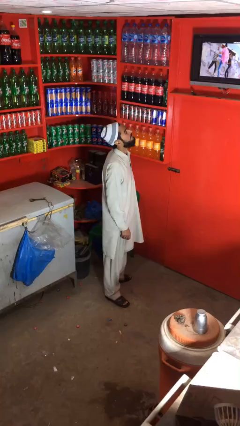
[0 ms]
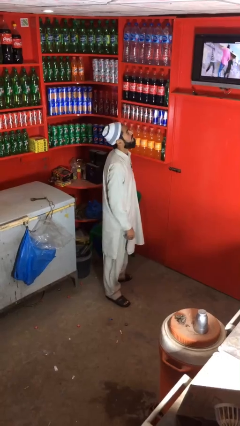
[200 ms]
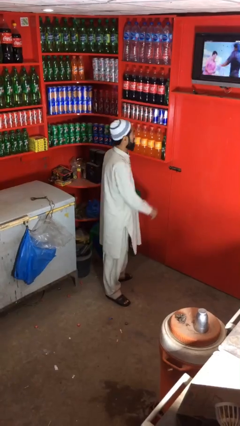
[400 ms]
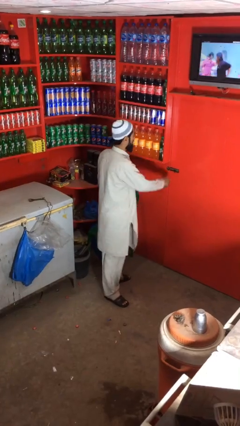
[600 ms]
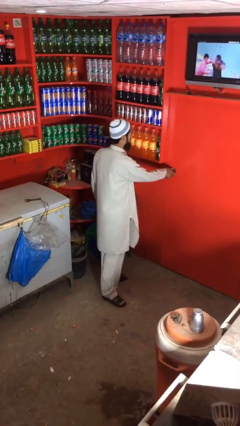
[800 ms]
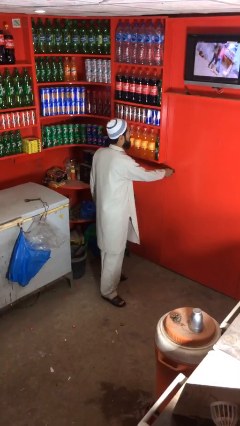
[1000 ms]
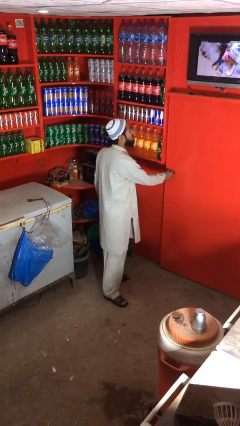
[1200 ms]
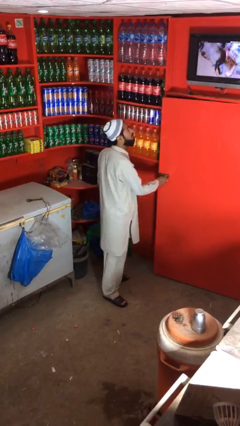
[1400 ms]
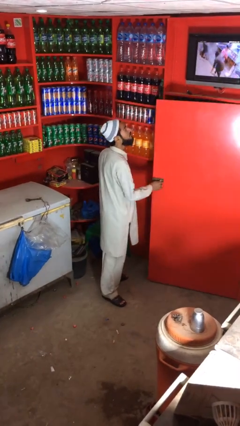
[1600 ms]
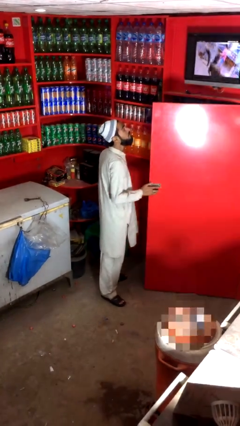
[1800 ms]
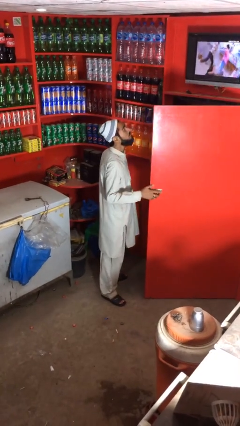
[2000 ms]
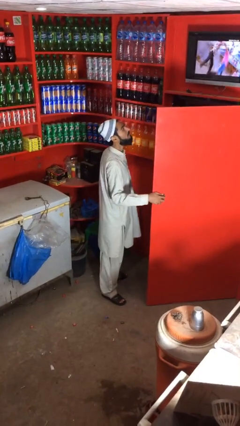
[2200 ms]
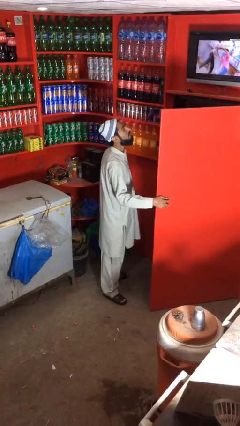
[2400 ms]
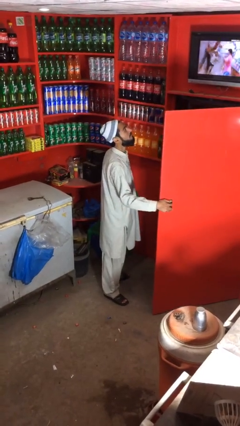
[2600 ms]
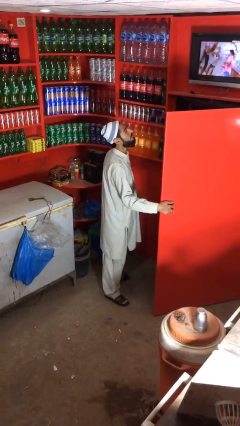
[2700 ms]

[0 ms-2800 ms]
person opens facility door

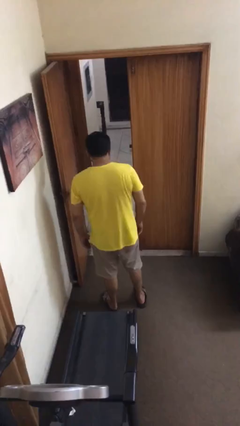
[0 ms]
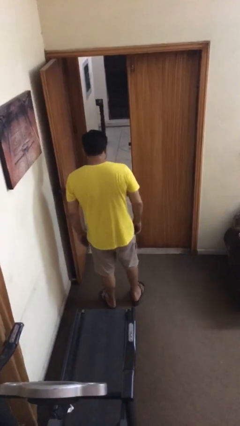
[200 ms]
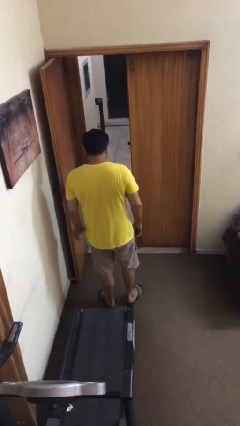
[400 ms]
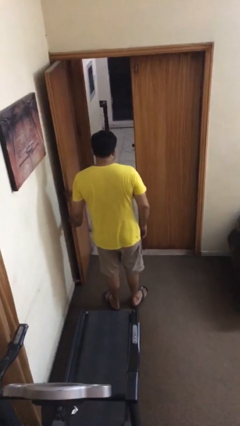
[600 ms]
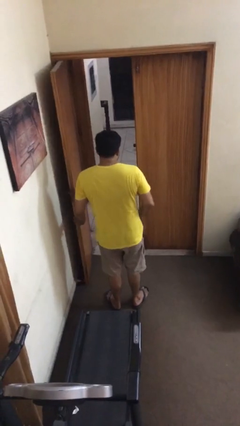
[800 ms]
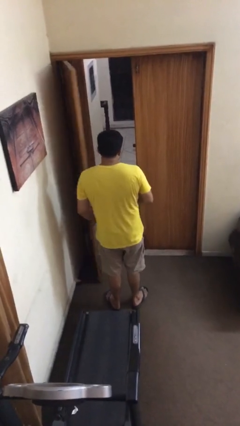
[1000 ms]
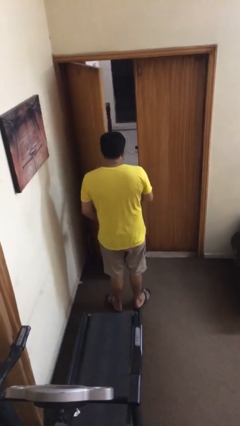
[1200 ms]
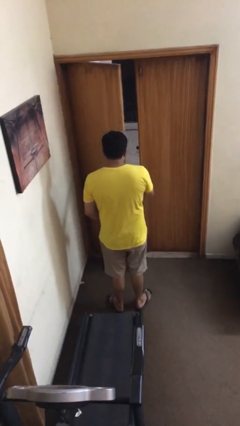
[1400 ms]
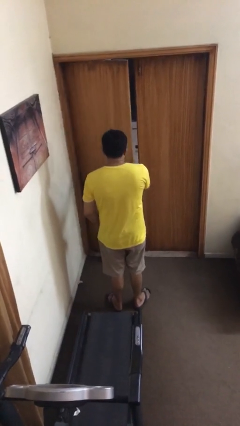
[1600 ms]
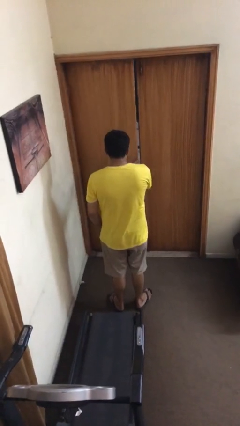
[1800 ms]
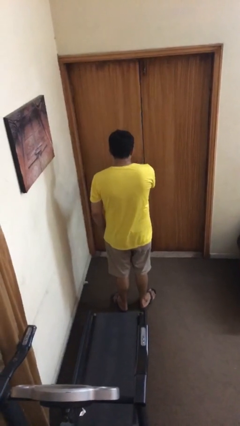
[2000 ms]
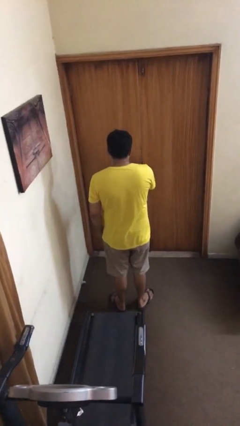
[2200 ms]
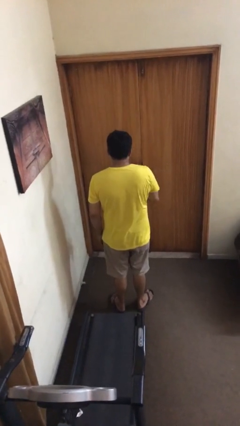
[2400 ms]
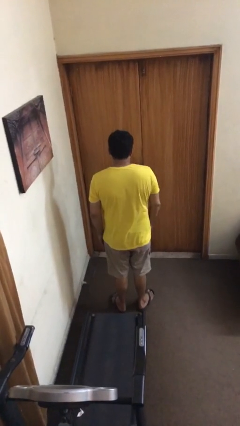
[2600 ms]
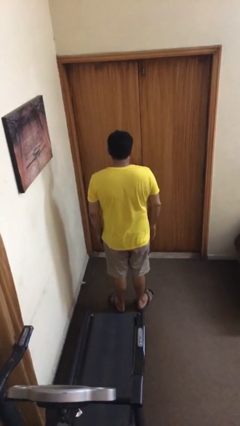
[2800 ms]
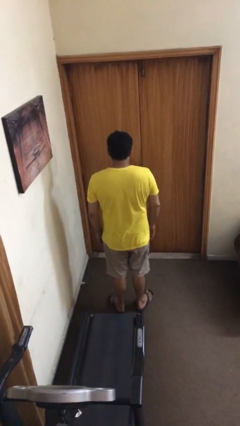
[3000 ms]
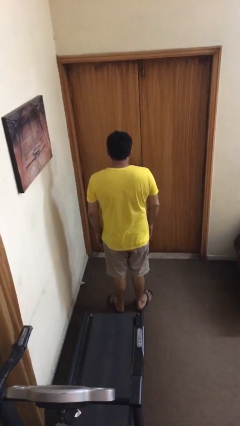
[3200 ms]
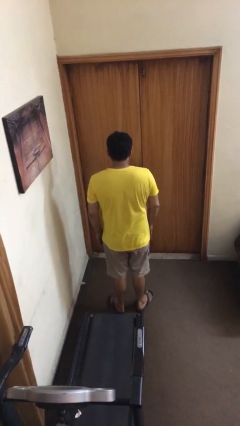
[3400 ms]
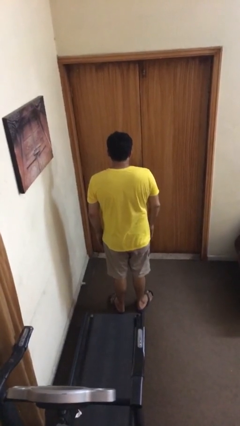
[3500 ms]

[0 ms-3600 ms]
person closes facility door

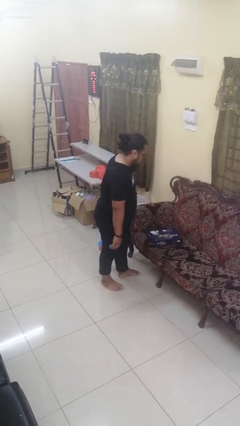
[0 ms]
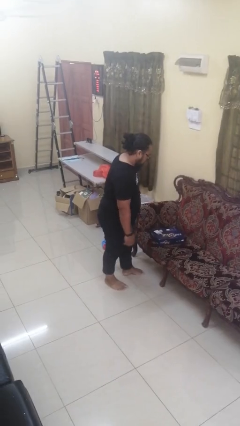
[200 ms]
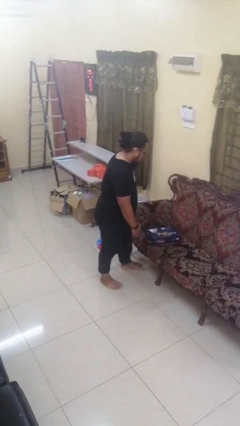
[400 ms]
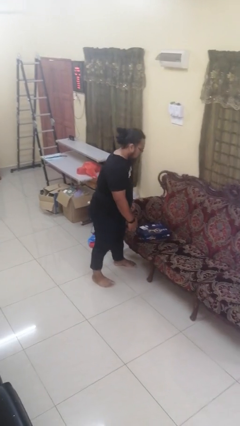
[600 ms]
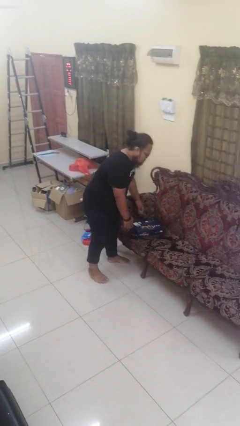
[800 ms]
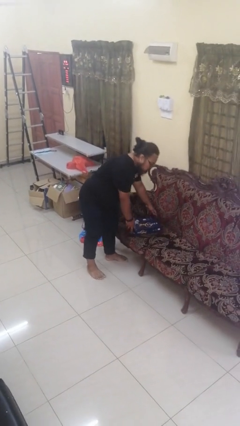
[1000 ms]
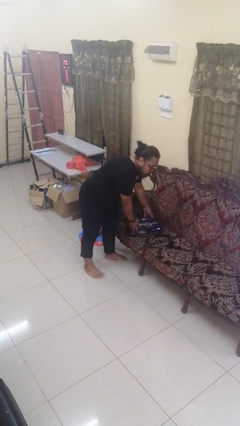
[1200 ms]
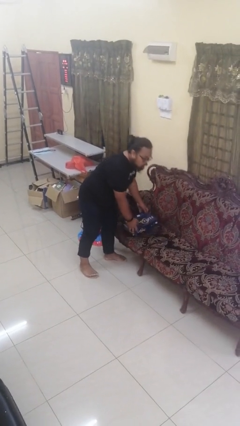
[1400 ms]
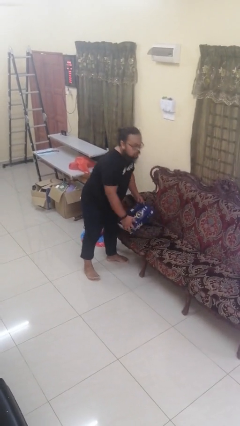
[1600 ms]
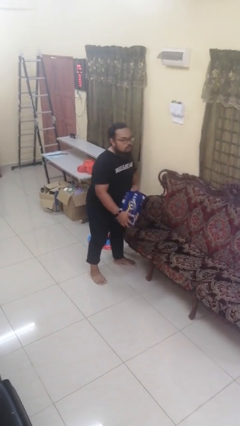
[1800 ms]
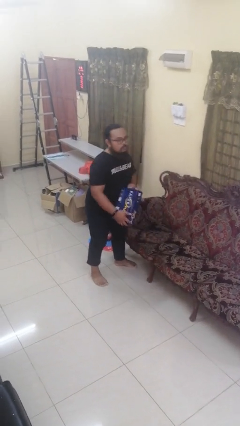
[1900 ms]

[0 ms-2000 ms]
person picks up object from couch

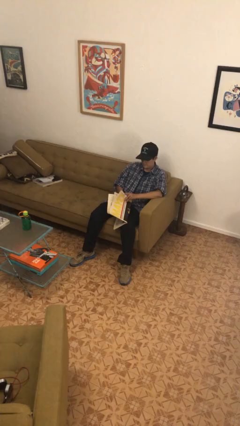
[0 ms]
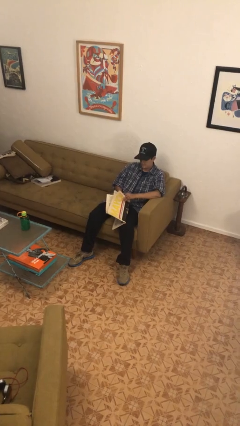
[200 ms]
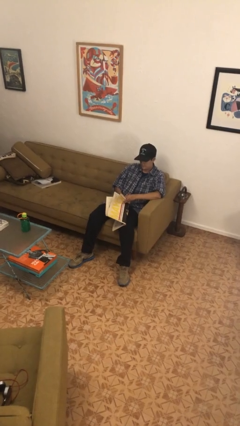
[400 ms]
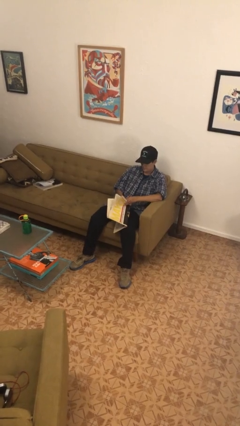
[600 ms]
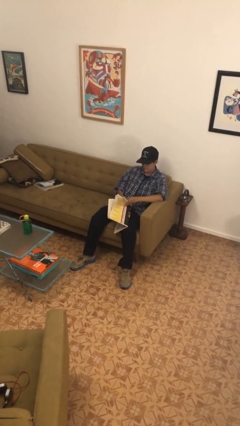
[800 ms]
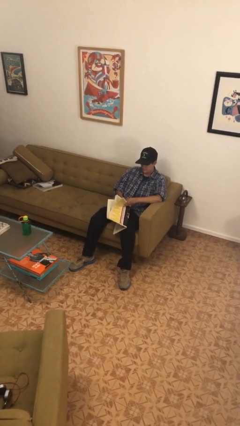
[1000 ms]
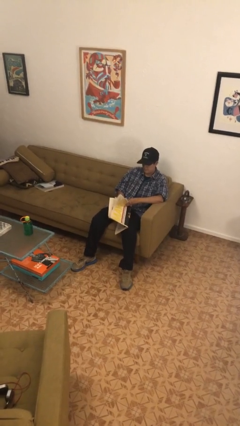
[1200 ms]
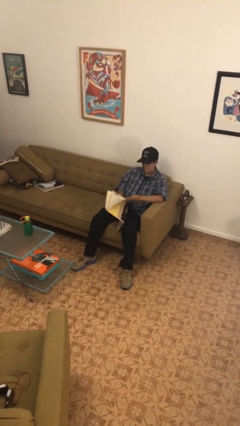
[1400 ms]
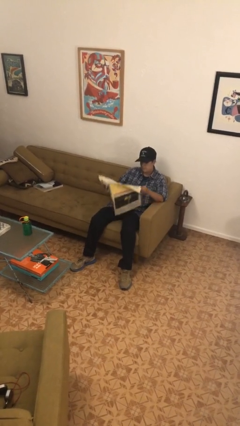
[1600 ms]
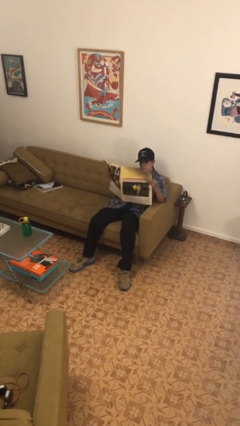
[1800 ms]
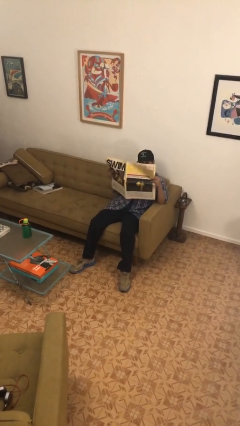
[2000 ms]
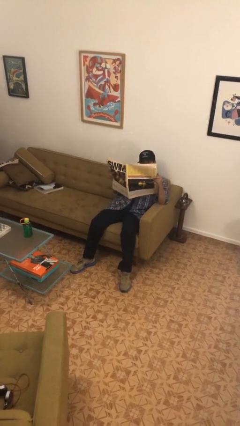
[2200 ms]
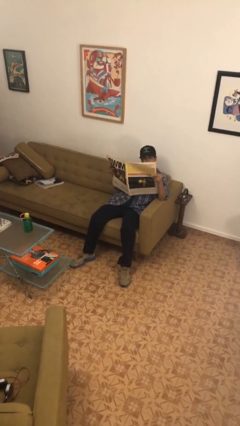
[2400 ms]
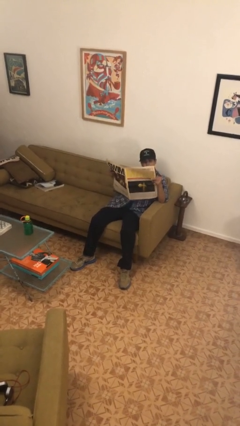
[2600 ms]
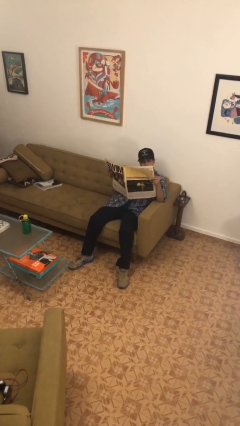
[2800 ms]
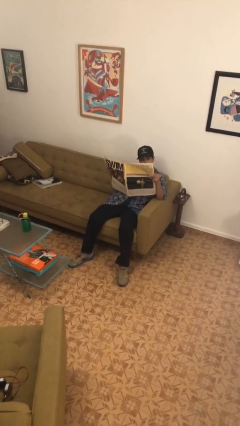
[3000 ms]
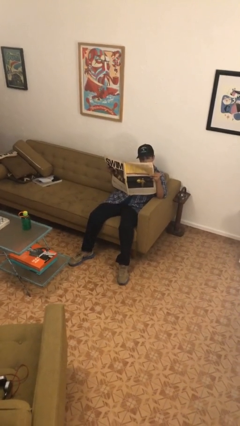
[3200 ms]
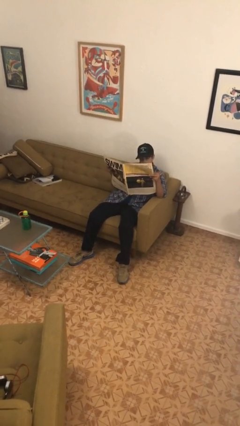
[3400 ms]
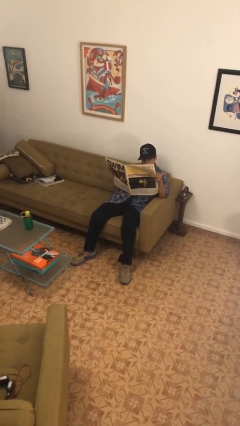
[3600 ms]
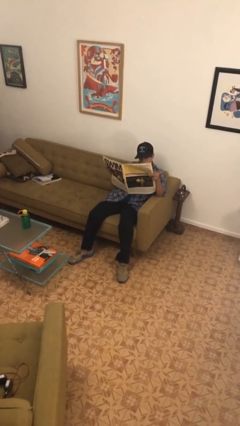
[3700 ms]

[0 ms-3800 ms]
person reads newspaper

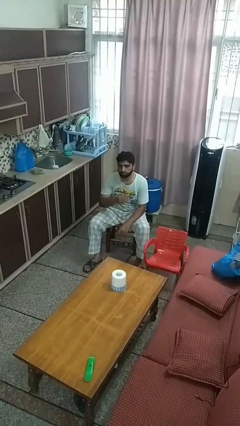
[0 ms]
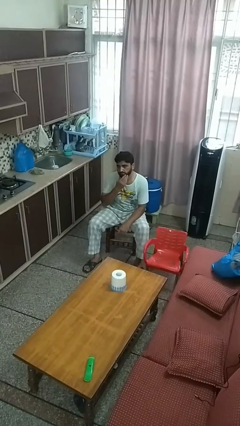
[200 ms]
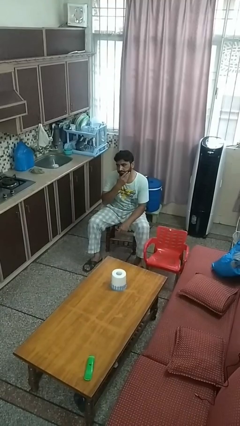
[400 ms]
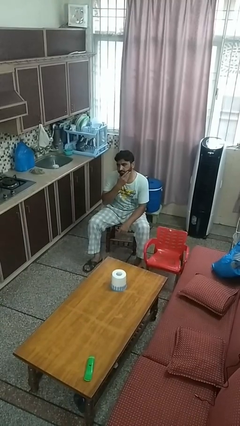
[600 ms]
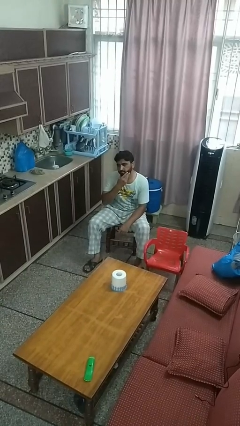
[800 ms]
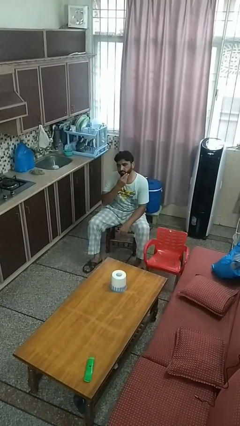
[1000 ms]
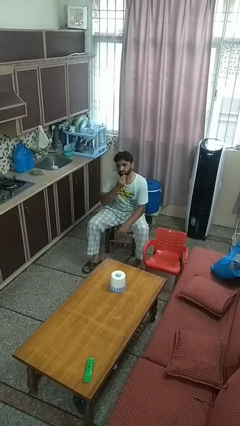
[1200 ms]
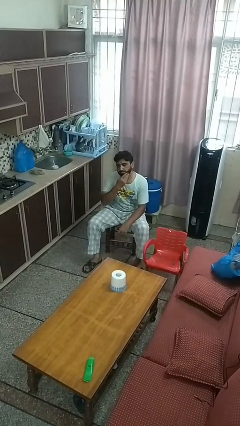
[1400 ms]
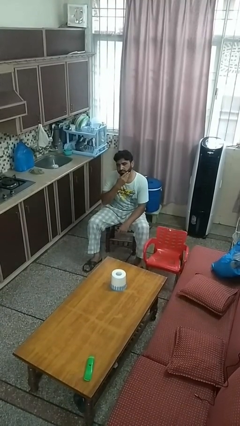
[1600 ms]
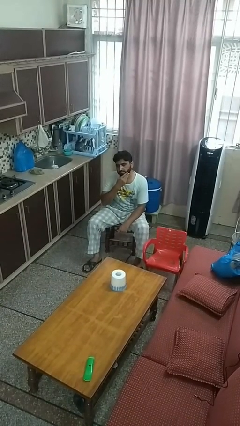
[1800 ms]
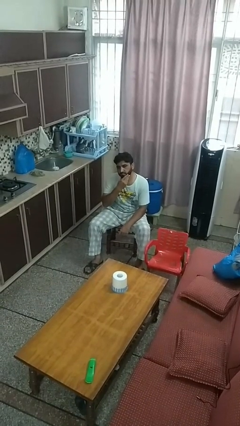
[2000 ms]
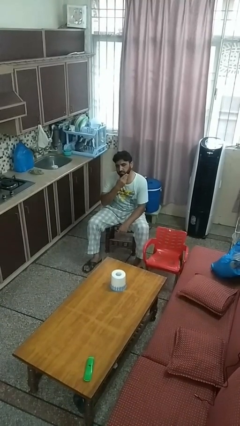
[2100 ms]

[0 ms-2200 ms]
person strokes chin

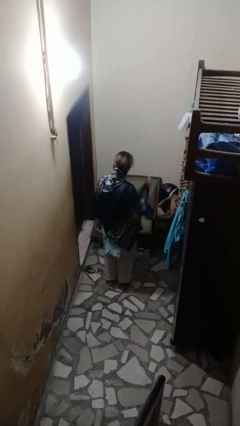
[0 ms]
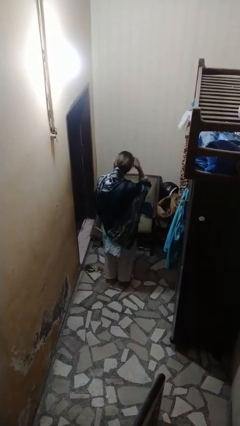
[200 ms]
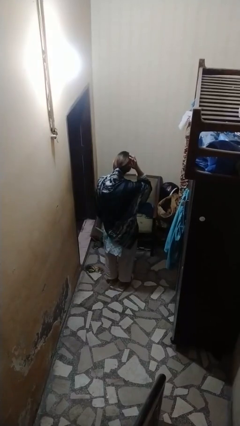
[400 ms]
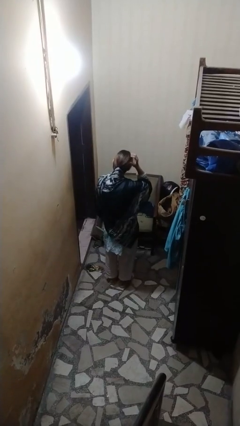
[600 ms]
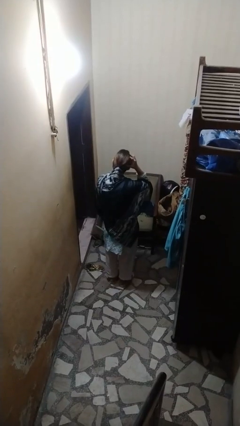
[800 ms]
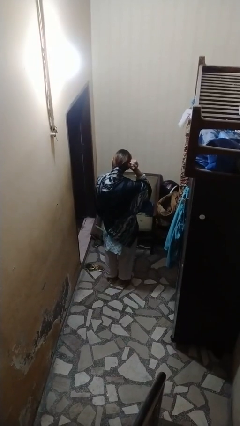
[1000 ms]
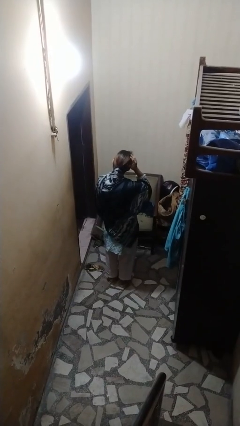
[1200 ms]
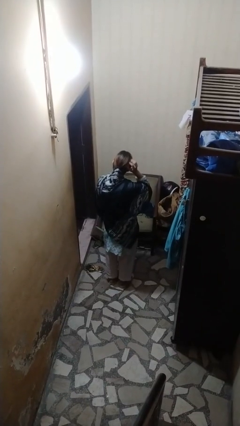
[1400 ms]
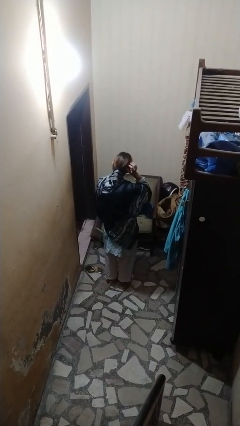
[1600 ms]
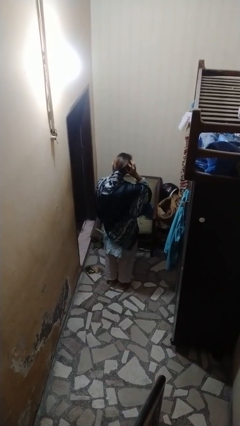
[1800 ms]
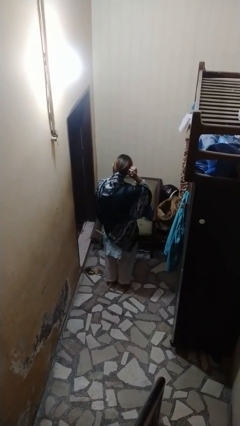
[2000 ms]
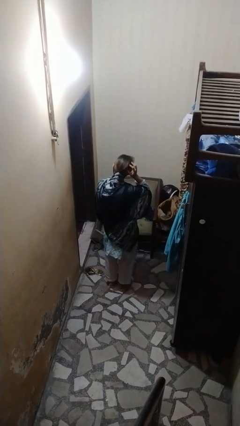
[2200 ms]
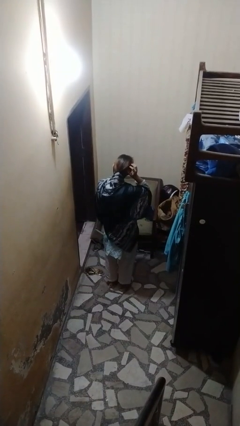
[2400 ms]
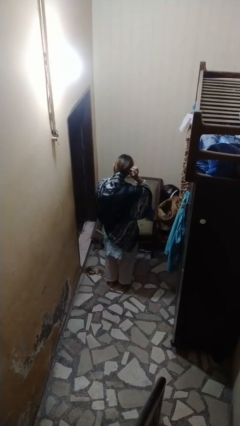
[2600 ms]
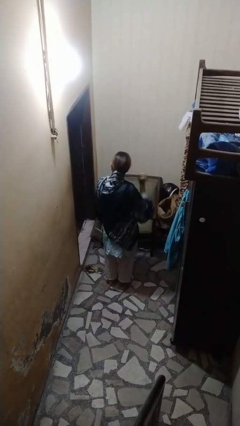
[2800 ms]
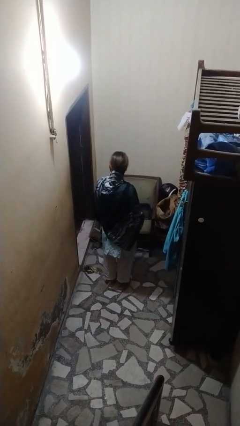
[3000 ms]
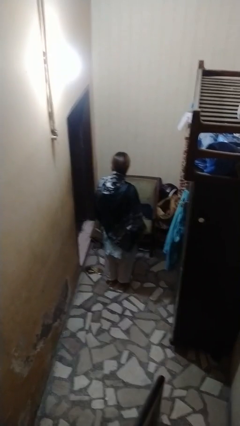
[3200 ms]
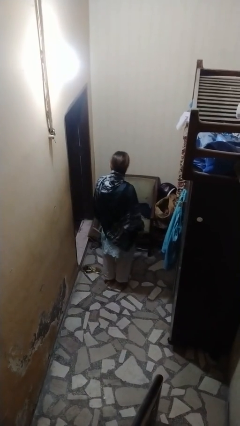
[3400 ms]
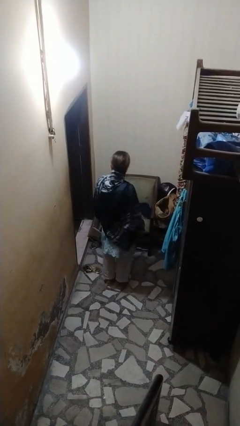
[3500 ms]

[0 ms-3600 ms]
person strokes hair
